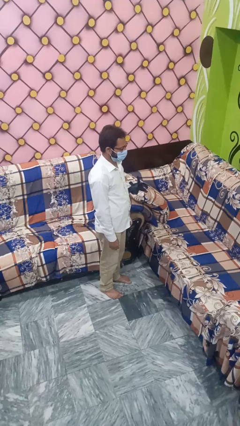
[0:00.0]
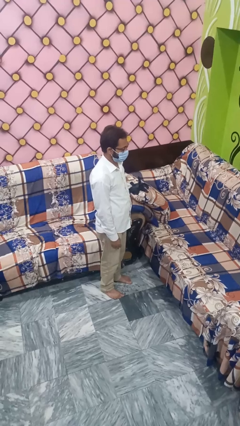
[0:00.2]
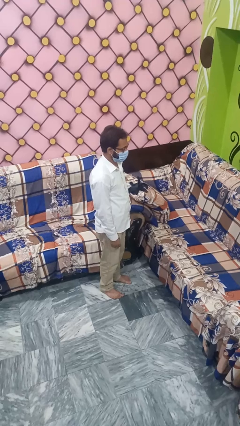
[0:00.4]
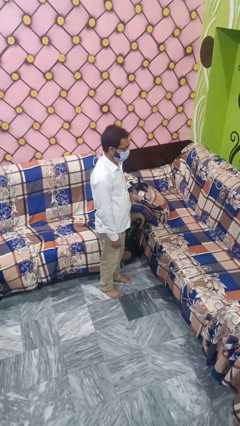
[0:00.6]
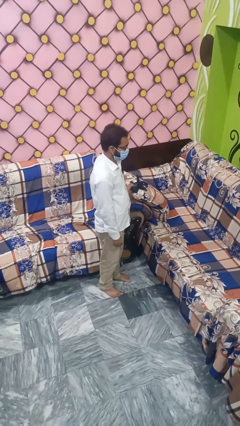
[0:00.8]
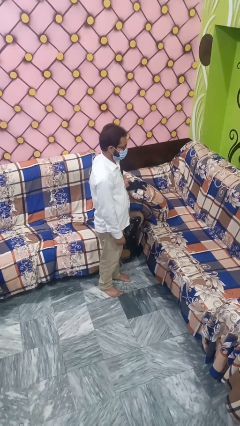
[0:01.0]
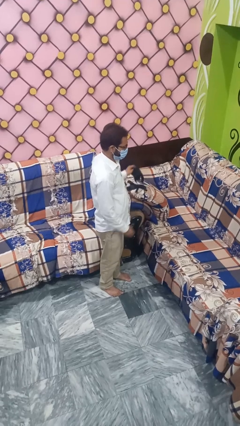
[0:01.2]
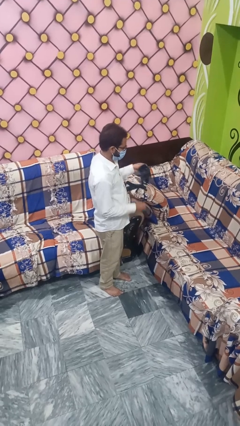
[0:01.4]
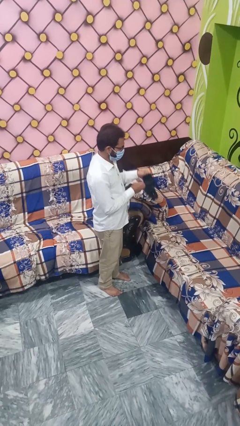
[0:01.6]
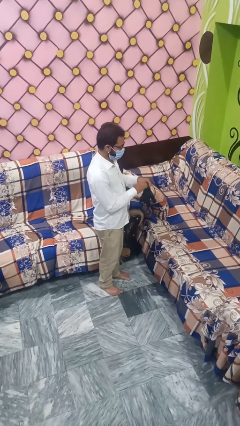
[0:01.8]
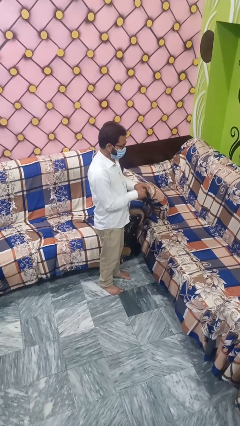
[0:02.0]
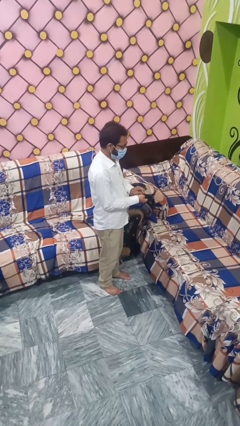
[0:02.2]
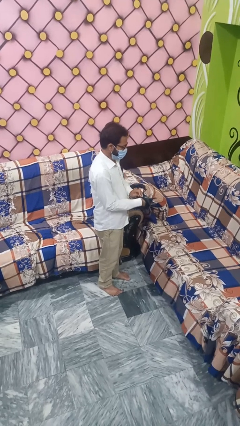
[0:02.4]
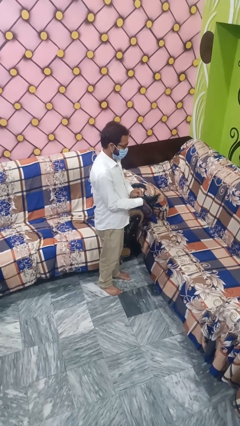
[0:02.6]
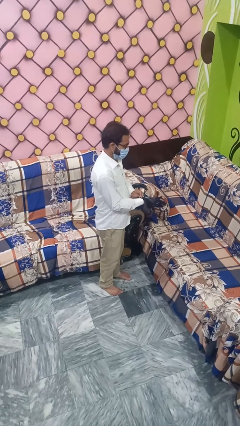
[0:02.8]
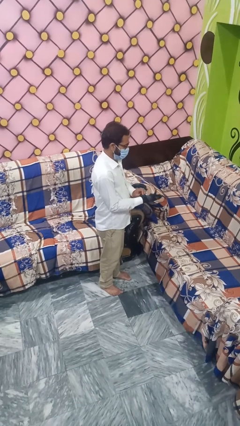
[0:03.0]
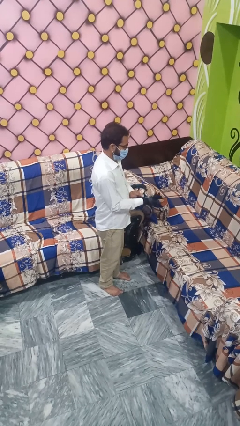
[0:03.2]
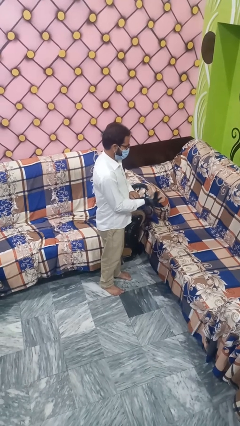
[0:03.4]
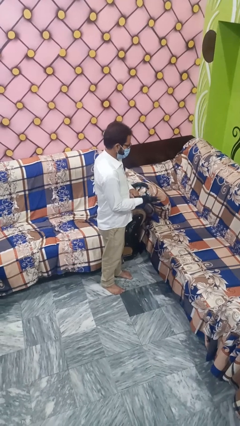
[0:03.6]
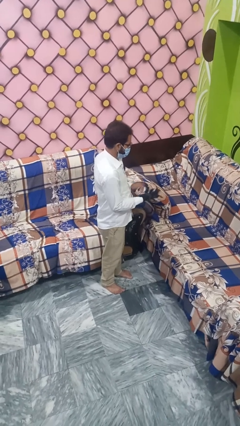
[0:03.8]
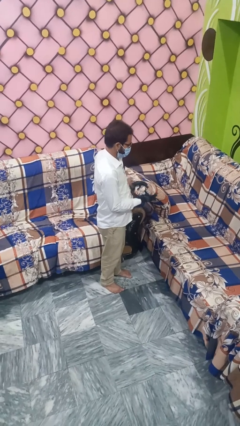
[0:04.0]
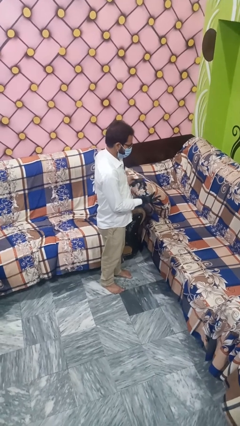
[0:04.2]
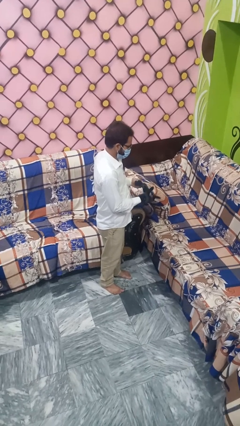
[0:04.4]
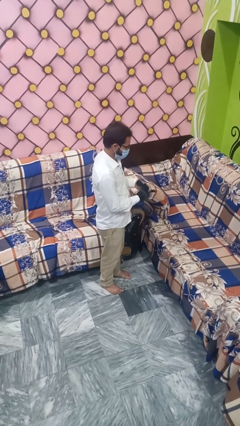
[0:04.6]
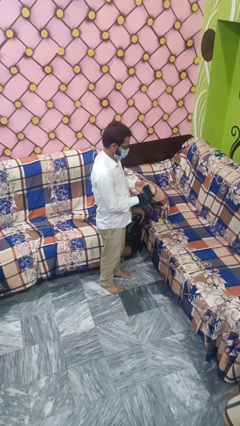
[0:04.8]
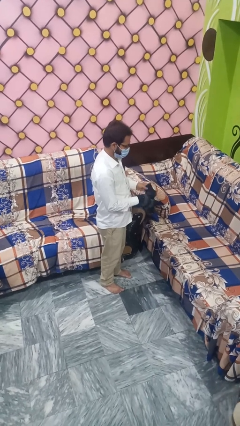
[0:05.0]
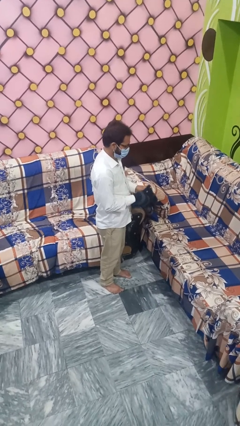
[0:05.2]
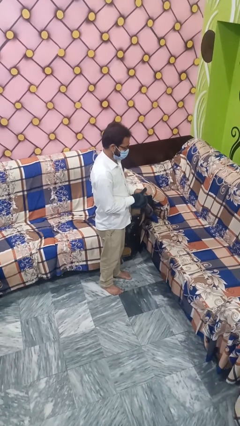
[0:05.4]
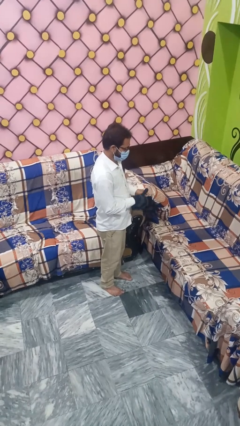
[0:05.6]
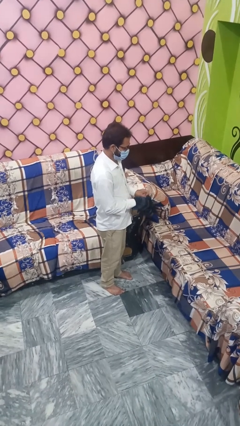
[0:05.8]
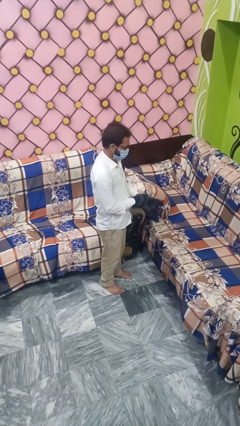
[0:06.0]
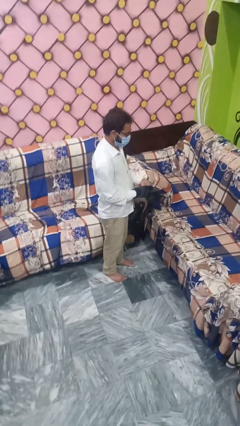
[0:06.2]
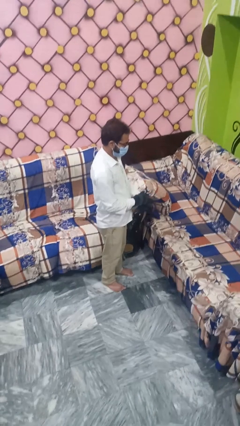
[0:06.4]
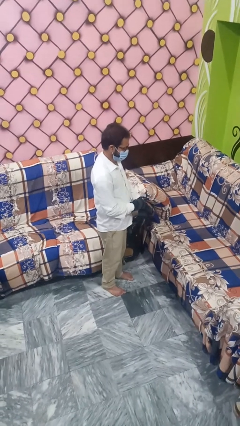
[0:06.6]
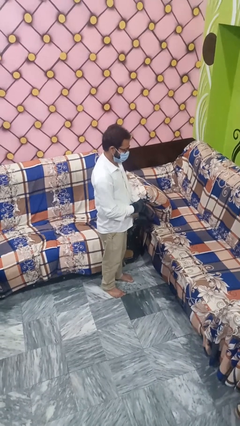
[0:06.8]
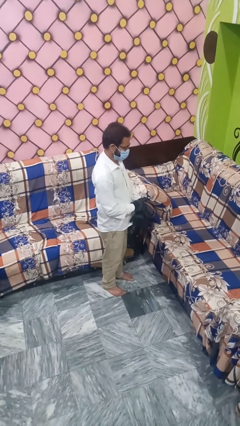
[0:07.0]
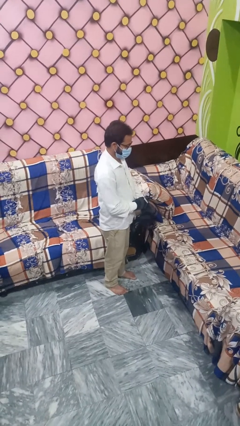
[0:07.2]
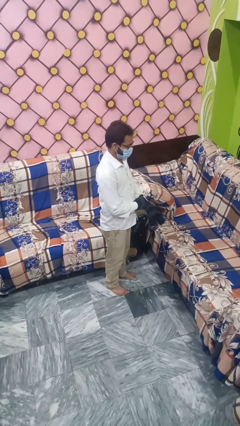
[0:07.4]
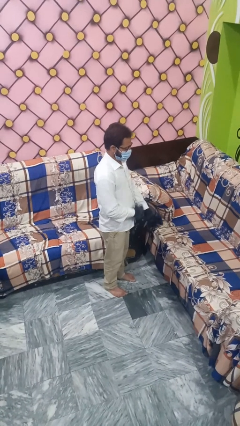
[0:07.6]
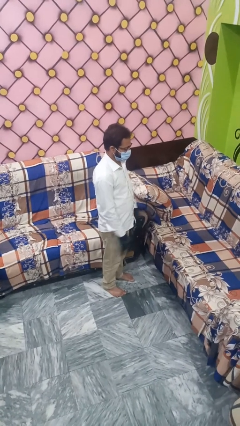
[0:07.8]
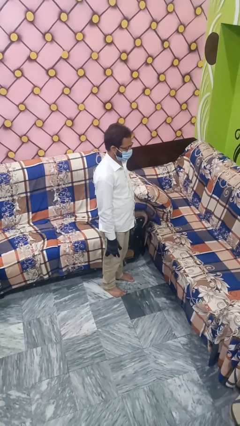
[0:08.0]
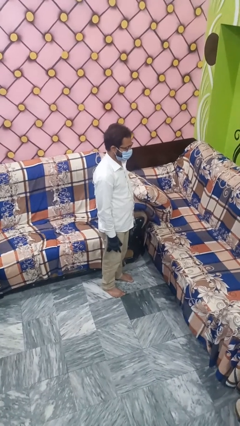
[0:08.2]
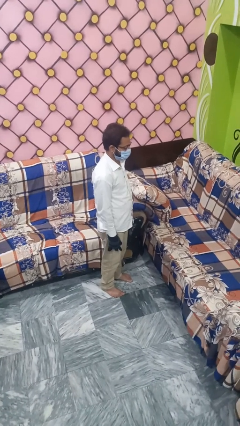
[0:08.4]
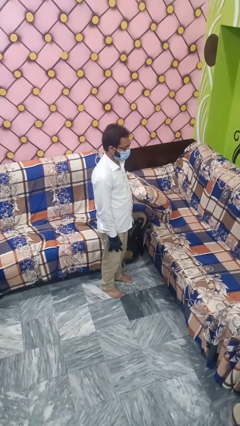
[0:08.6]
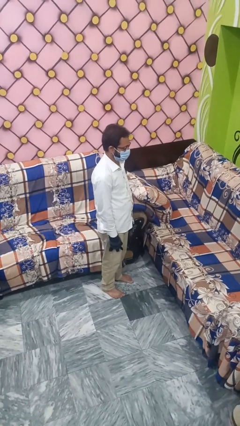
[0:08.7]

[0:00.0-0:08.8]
person puts on gloves

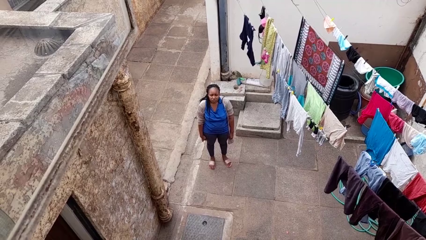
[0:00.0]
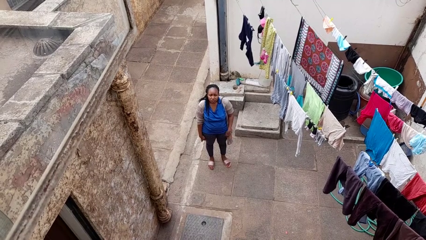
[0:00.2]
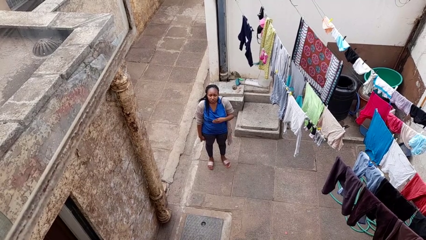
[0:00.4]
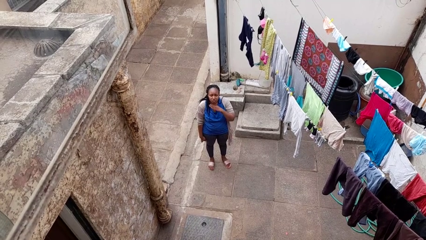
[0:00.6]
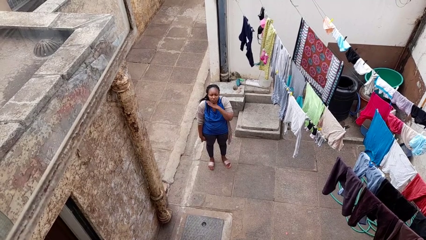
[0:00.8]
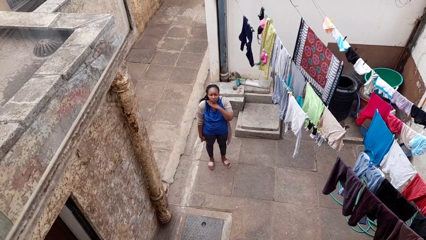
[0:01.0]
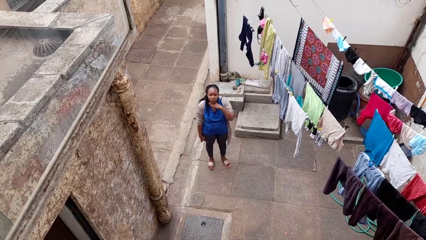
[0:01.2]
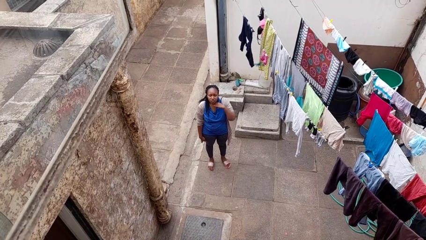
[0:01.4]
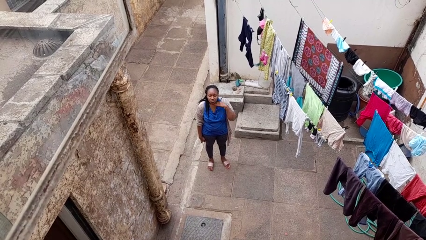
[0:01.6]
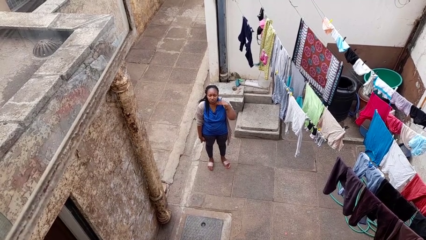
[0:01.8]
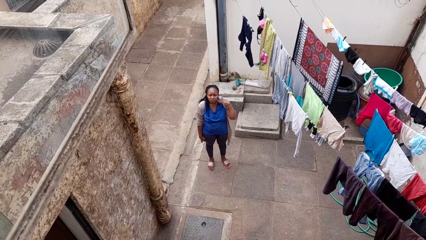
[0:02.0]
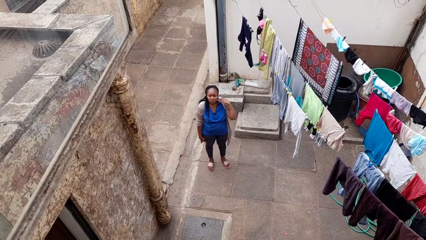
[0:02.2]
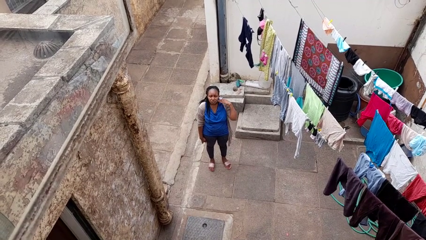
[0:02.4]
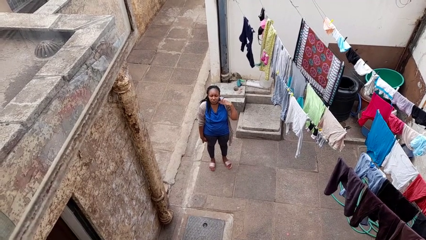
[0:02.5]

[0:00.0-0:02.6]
person gestures cut

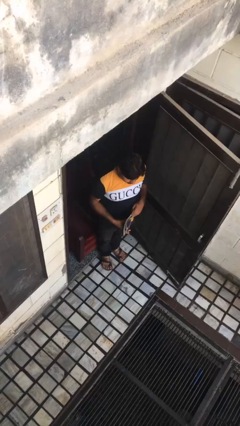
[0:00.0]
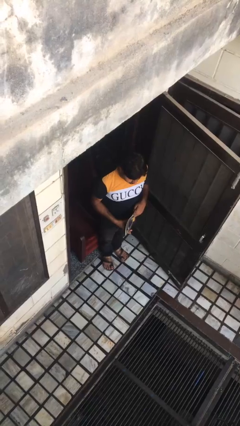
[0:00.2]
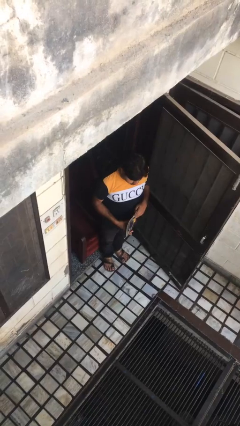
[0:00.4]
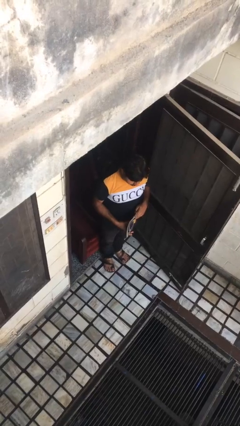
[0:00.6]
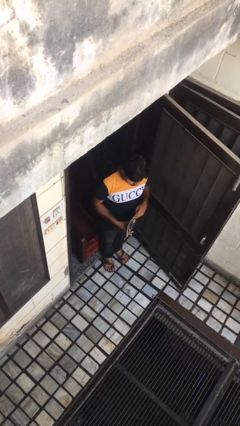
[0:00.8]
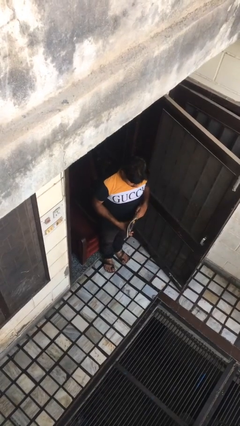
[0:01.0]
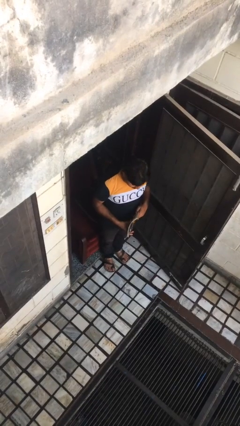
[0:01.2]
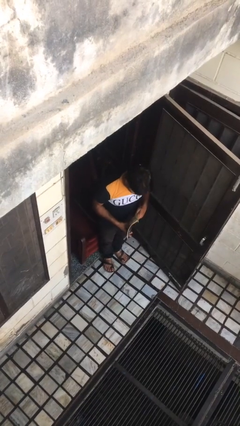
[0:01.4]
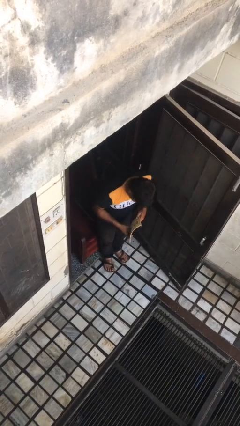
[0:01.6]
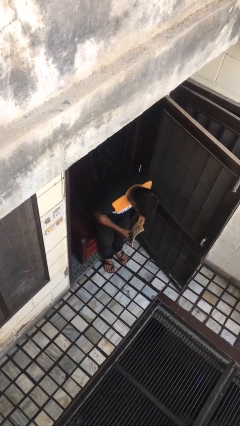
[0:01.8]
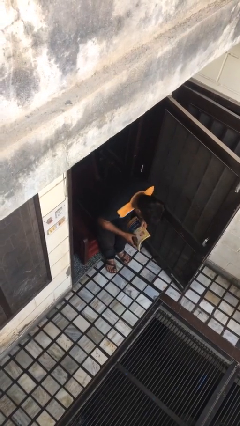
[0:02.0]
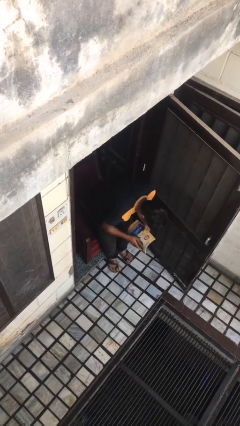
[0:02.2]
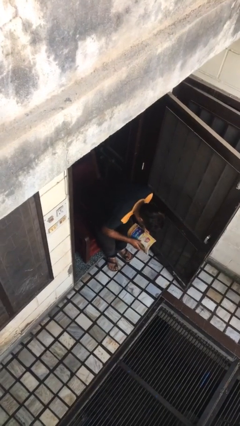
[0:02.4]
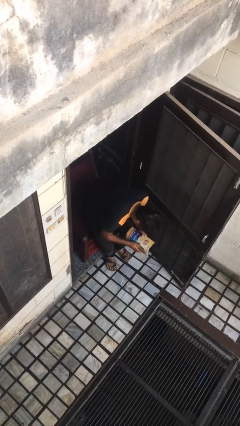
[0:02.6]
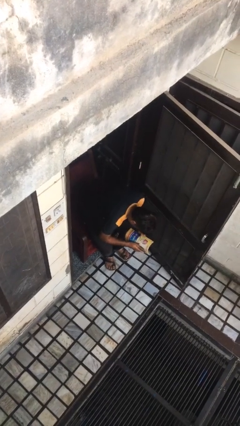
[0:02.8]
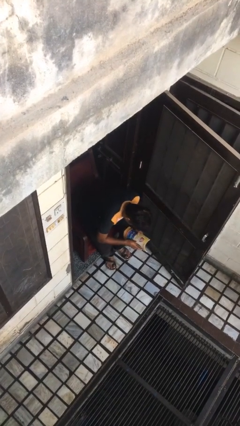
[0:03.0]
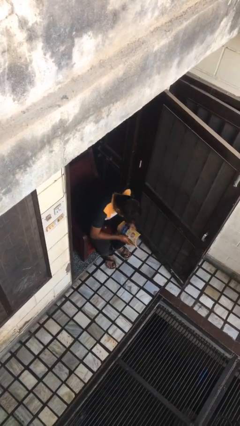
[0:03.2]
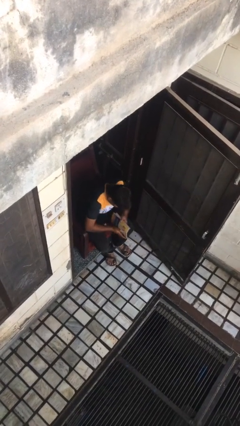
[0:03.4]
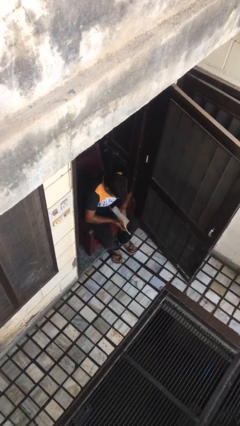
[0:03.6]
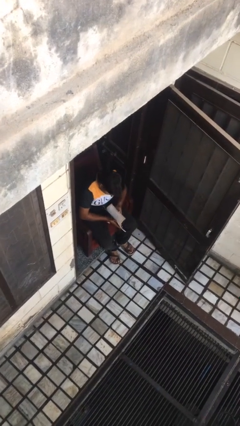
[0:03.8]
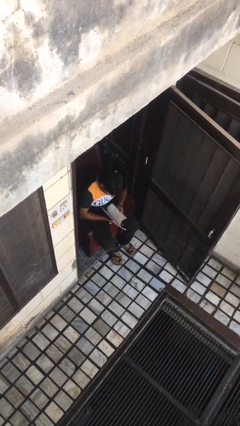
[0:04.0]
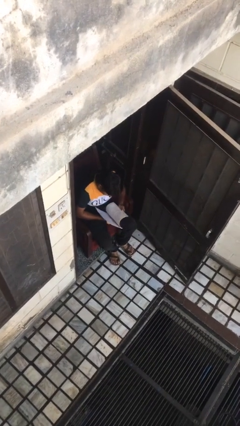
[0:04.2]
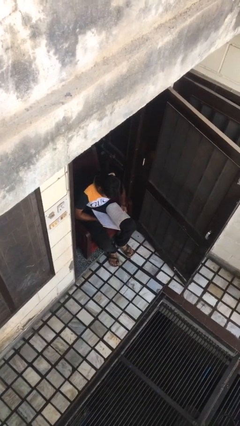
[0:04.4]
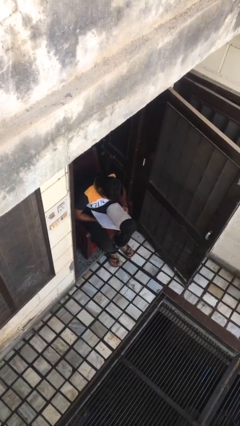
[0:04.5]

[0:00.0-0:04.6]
person sits down

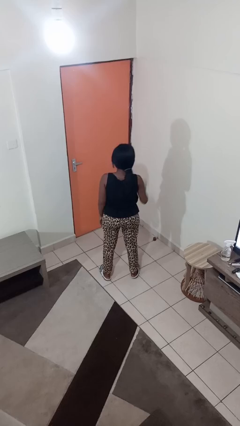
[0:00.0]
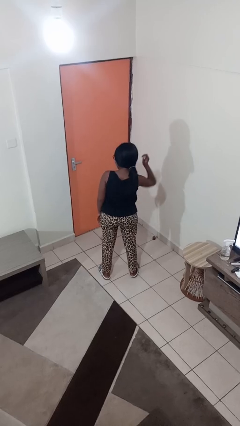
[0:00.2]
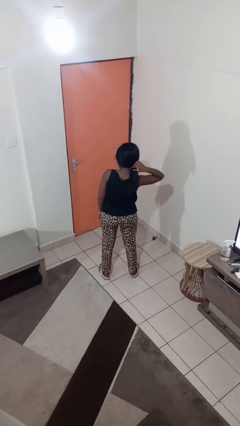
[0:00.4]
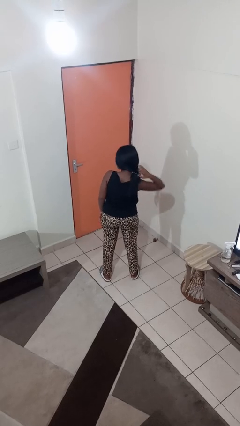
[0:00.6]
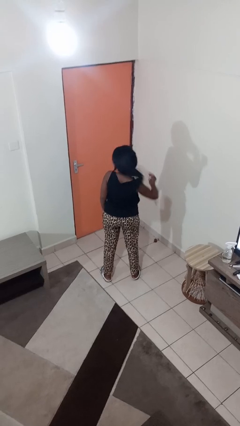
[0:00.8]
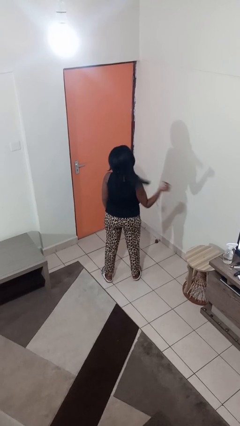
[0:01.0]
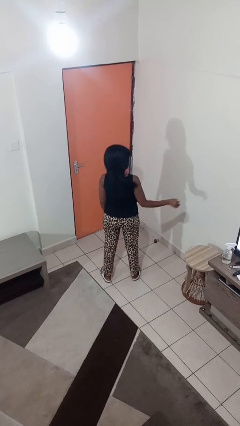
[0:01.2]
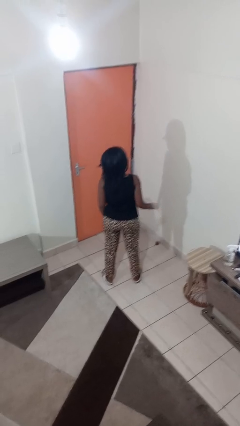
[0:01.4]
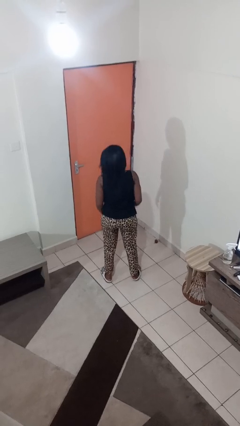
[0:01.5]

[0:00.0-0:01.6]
person takes off hairtie

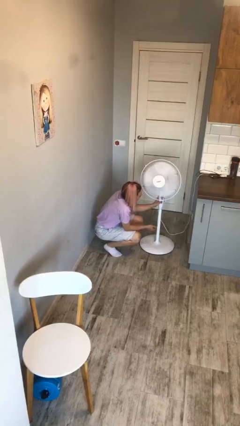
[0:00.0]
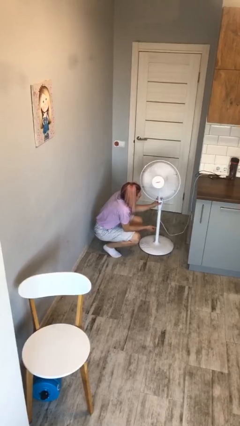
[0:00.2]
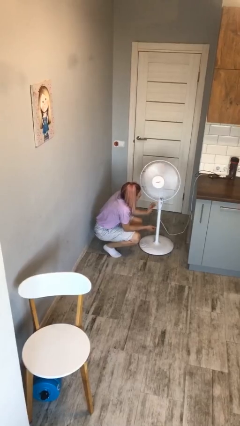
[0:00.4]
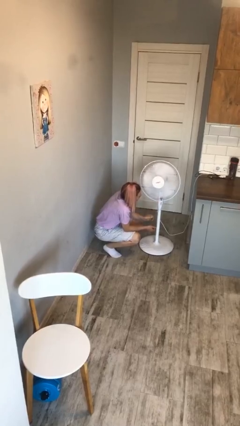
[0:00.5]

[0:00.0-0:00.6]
person turns off fan
